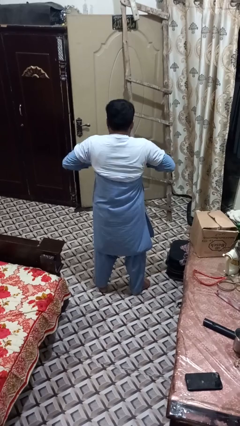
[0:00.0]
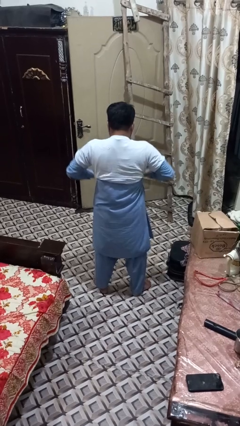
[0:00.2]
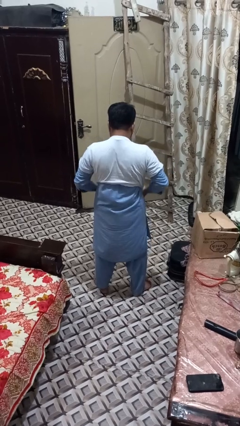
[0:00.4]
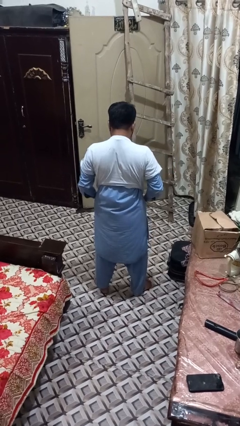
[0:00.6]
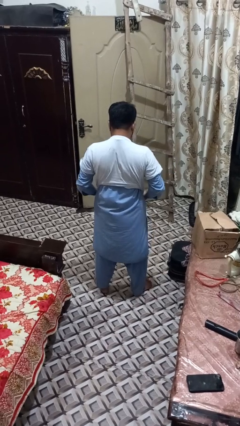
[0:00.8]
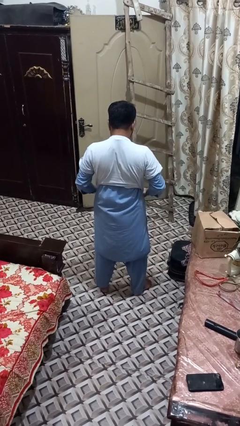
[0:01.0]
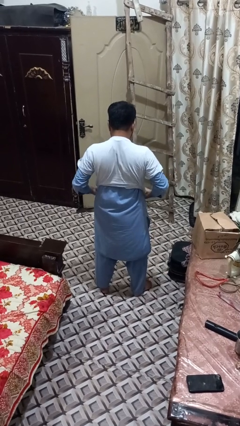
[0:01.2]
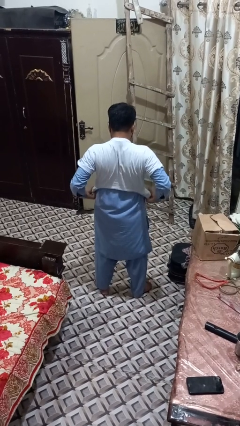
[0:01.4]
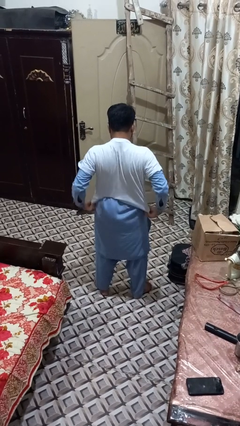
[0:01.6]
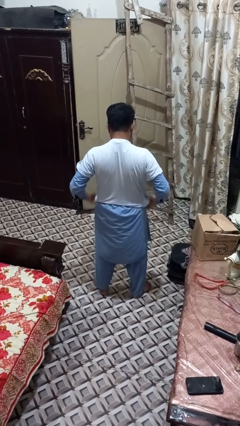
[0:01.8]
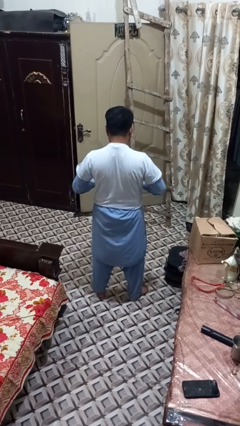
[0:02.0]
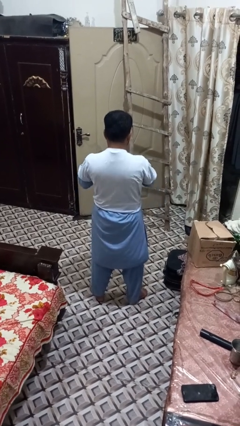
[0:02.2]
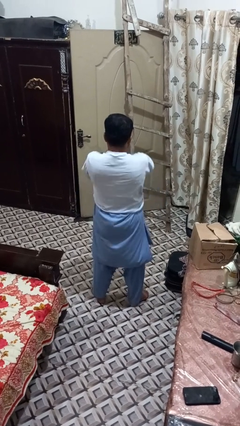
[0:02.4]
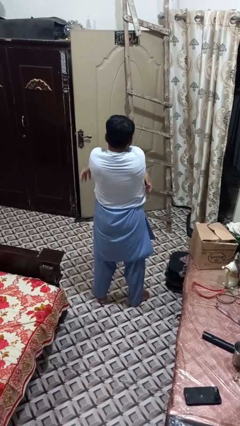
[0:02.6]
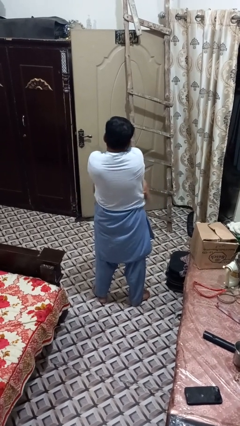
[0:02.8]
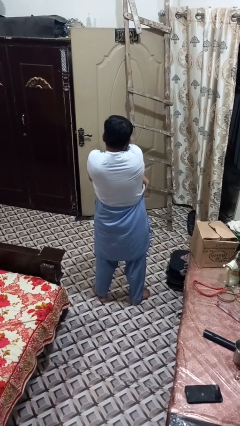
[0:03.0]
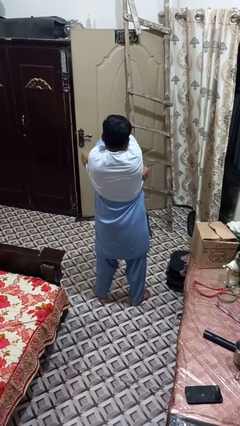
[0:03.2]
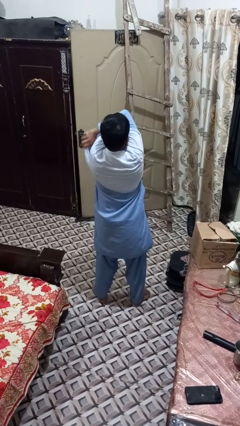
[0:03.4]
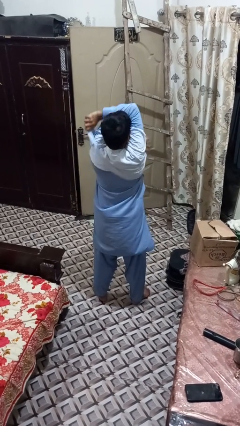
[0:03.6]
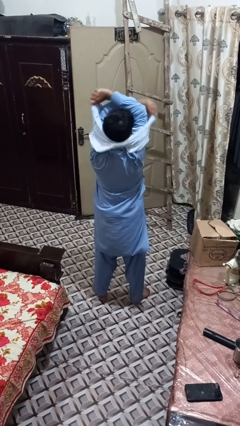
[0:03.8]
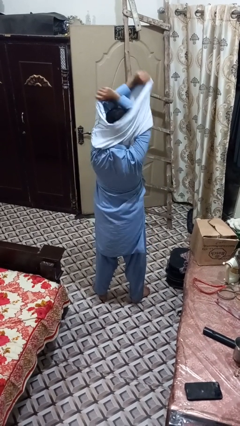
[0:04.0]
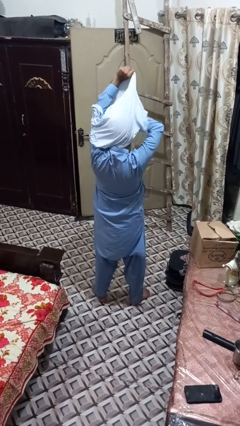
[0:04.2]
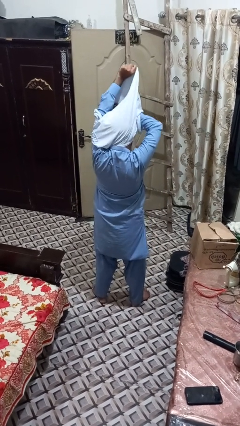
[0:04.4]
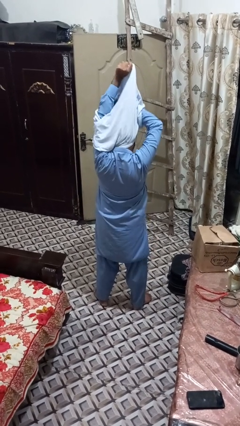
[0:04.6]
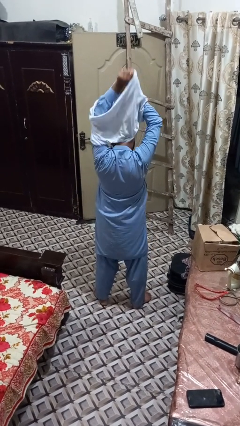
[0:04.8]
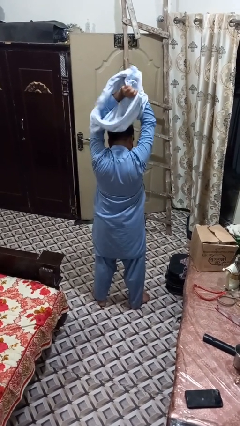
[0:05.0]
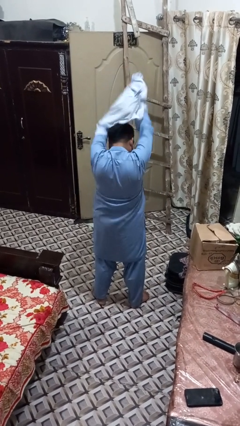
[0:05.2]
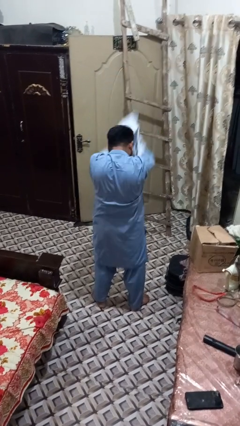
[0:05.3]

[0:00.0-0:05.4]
person takes off shirt

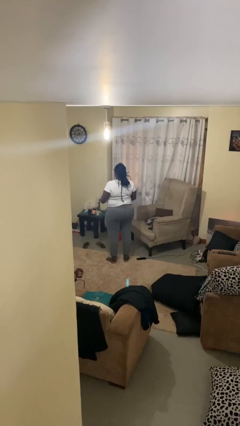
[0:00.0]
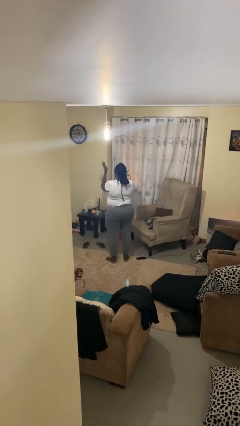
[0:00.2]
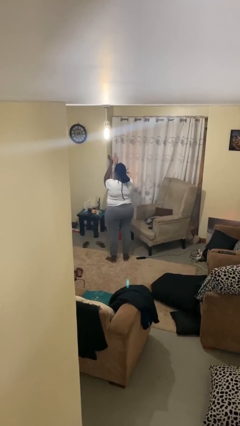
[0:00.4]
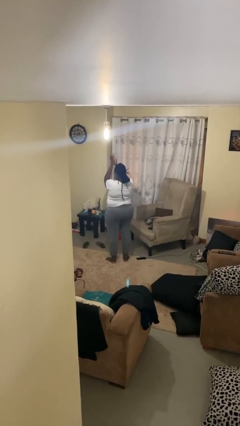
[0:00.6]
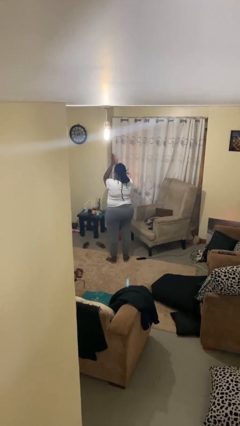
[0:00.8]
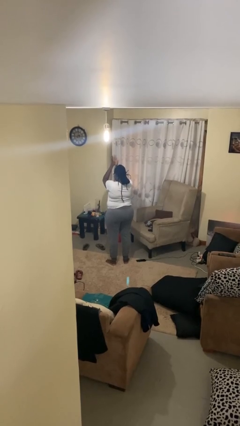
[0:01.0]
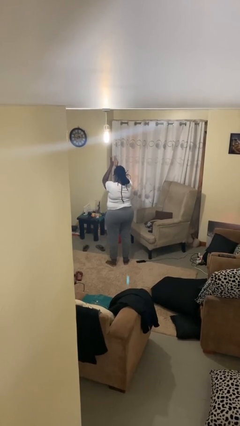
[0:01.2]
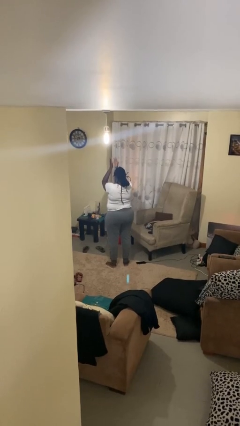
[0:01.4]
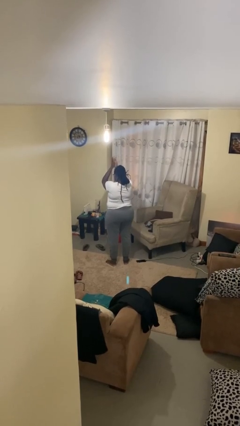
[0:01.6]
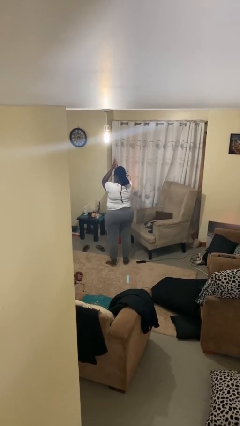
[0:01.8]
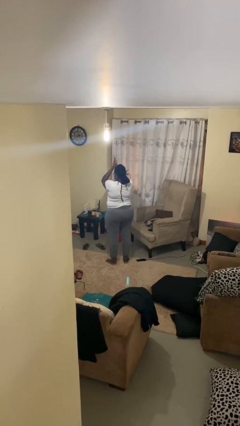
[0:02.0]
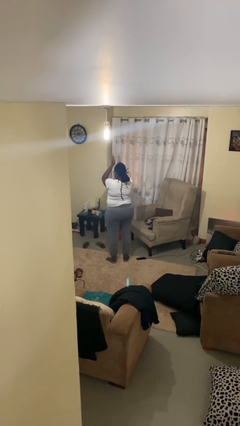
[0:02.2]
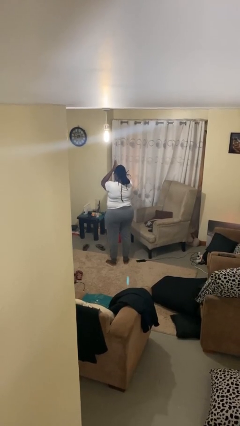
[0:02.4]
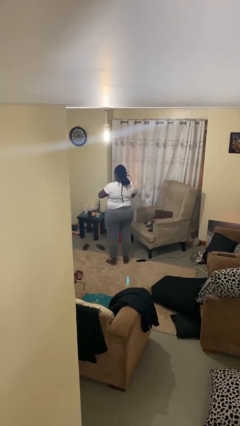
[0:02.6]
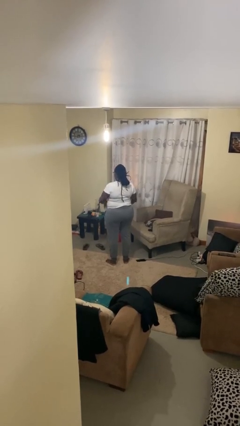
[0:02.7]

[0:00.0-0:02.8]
person claps hands

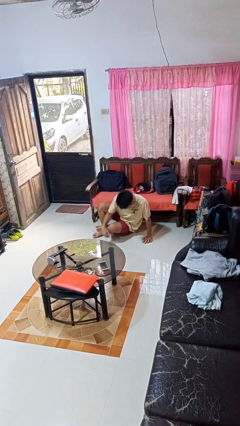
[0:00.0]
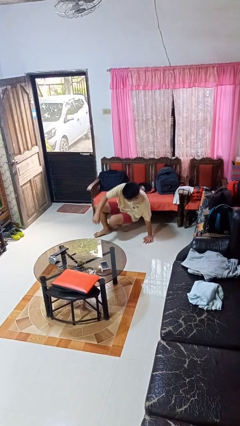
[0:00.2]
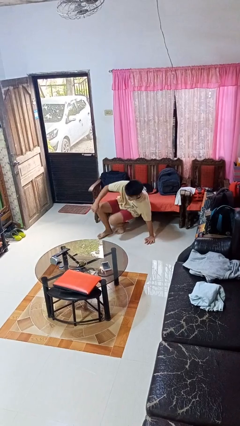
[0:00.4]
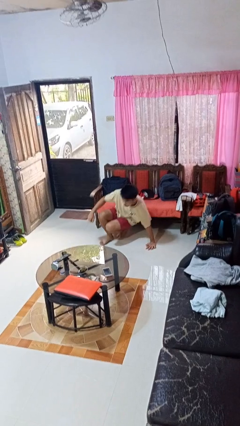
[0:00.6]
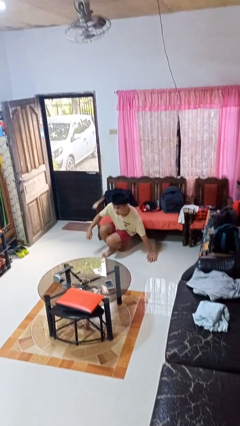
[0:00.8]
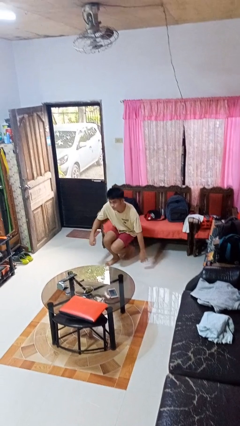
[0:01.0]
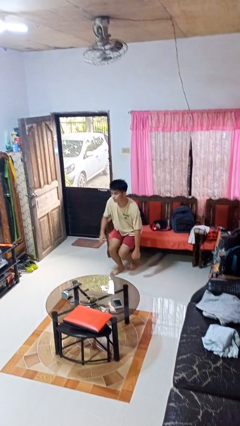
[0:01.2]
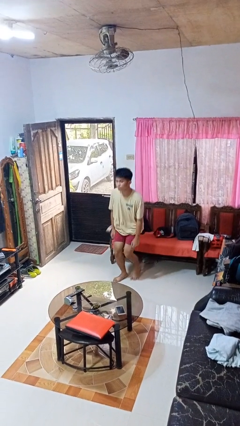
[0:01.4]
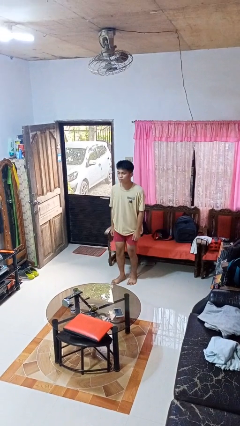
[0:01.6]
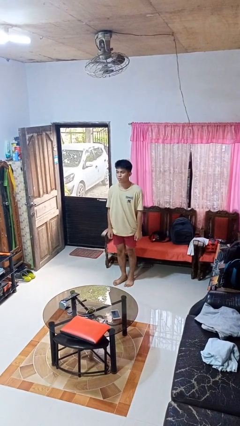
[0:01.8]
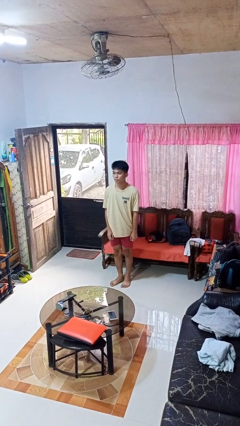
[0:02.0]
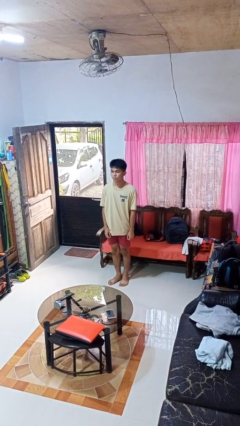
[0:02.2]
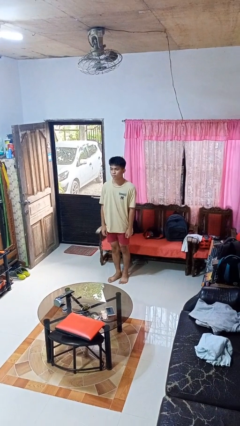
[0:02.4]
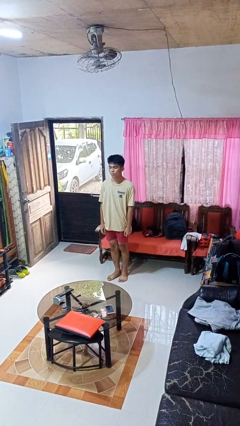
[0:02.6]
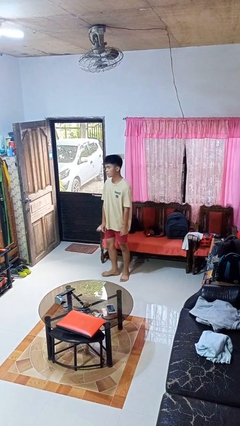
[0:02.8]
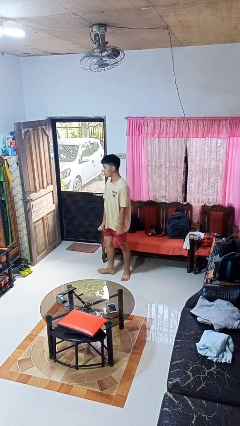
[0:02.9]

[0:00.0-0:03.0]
person stands up from floor

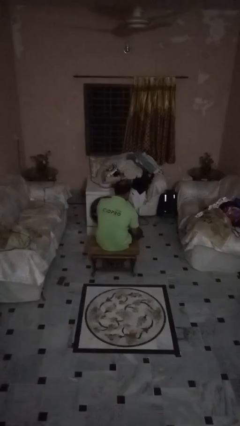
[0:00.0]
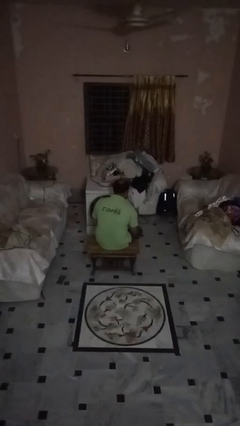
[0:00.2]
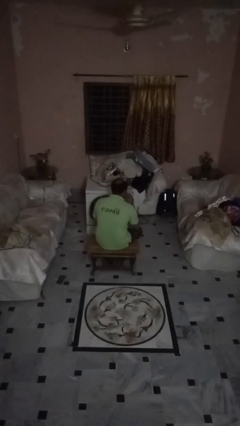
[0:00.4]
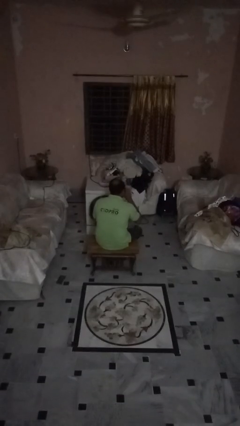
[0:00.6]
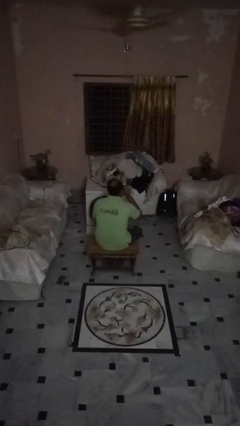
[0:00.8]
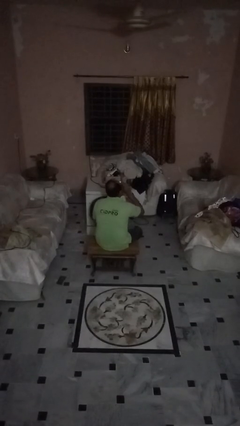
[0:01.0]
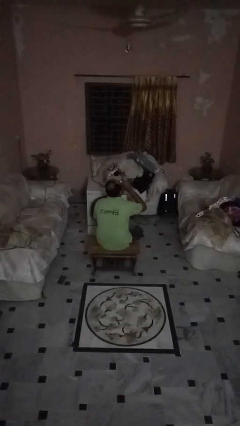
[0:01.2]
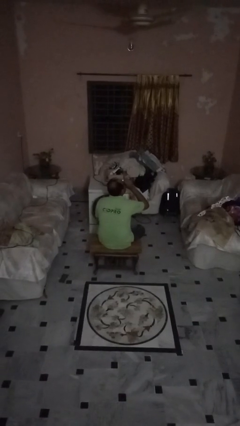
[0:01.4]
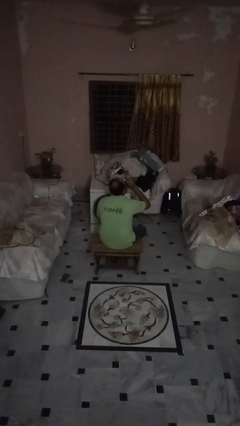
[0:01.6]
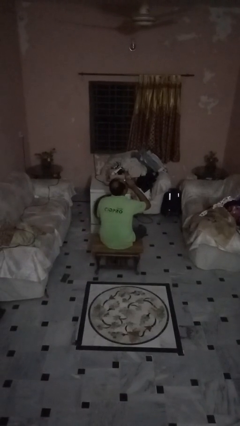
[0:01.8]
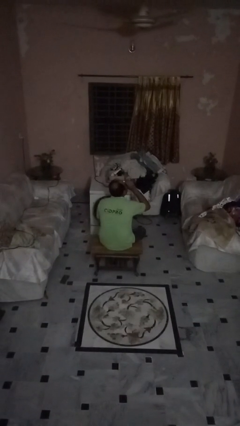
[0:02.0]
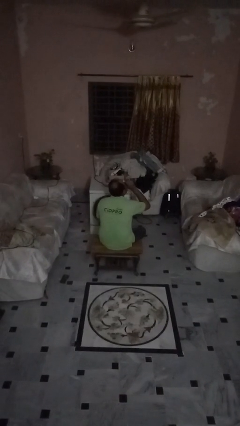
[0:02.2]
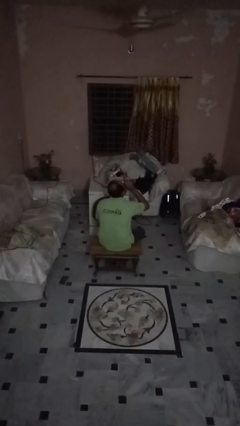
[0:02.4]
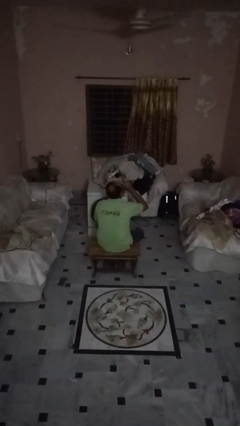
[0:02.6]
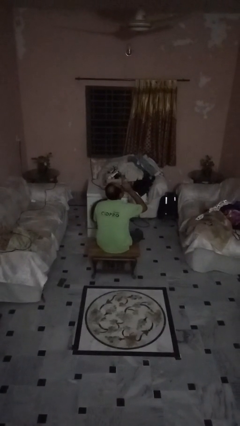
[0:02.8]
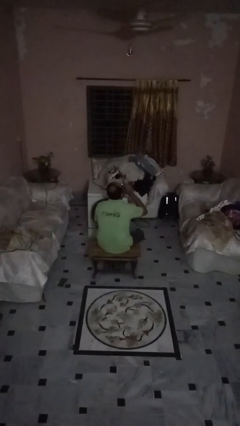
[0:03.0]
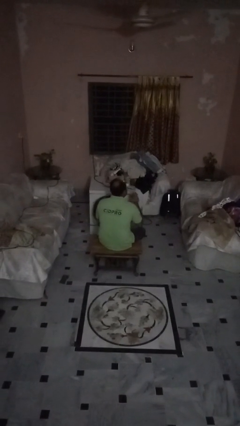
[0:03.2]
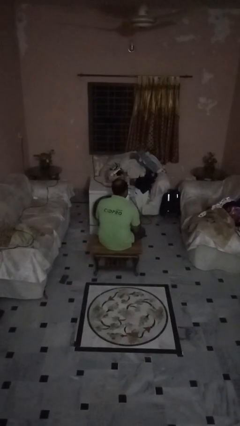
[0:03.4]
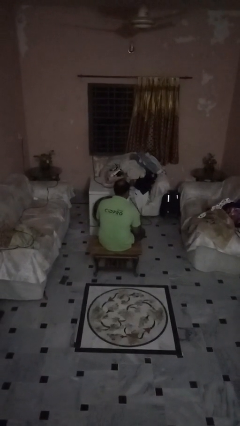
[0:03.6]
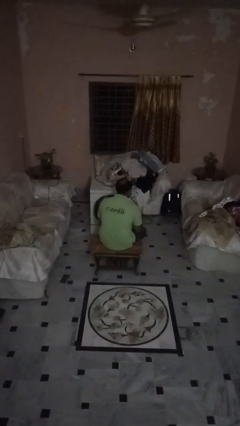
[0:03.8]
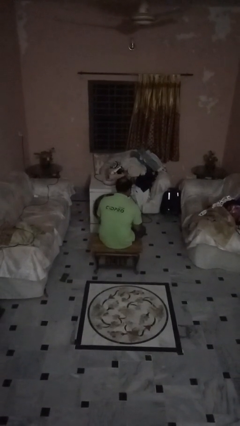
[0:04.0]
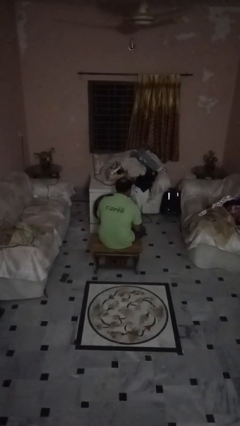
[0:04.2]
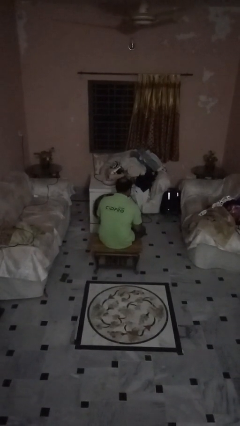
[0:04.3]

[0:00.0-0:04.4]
person drinks from beverage can

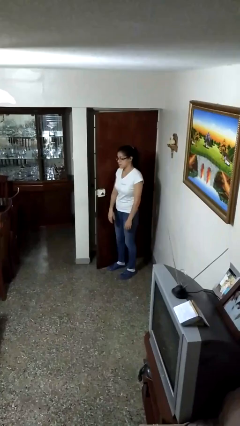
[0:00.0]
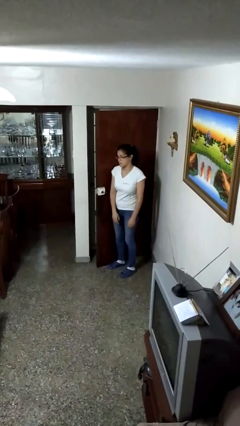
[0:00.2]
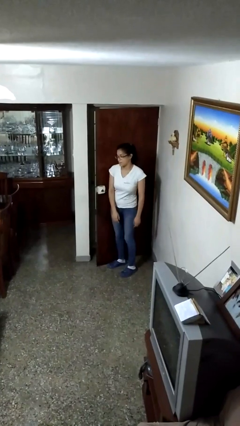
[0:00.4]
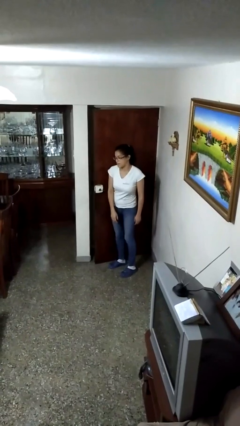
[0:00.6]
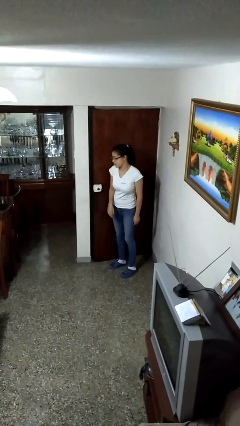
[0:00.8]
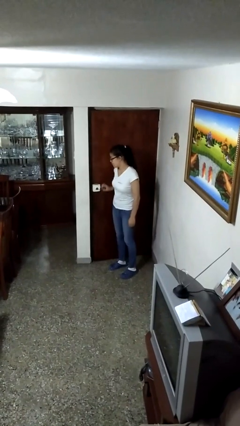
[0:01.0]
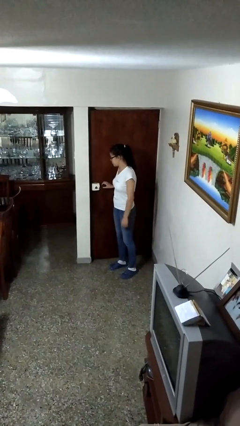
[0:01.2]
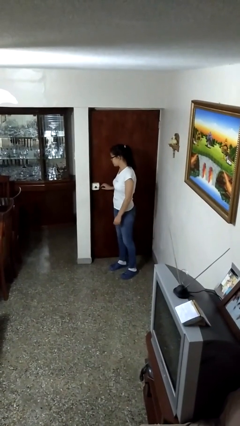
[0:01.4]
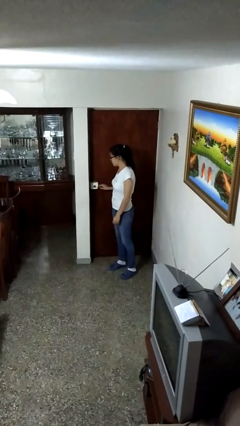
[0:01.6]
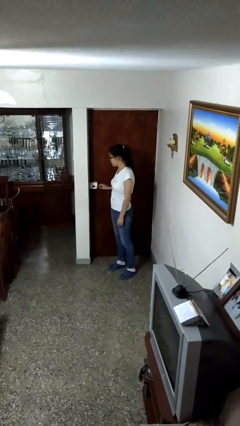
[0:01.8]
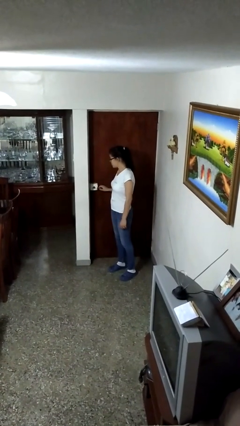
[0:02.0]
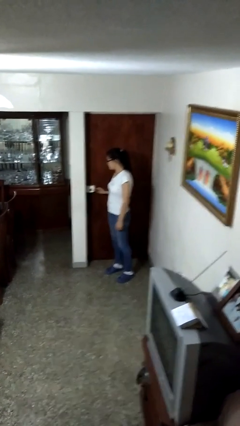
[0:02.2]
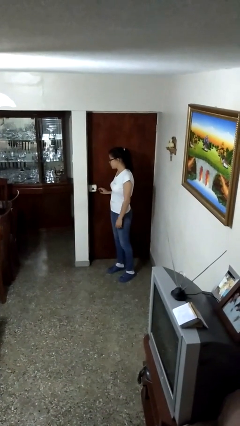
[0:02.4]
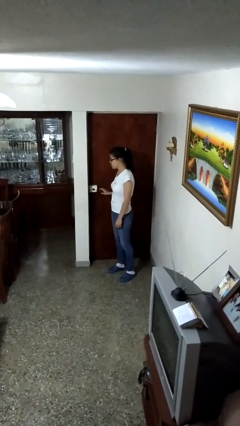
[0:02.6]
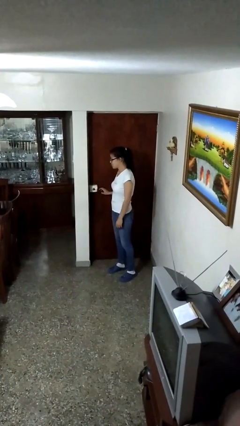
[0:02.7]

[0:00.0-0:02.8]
person closes door with hip
